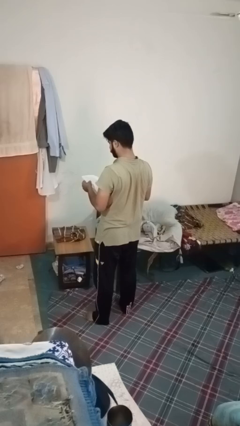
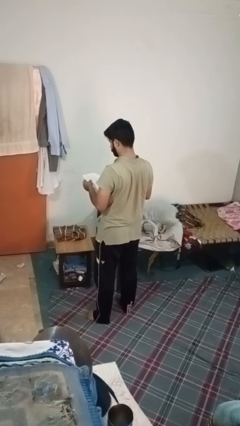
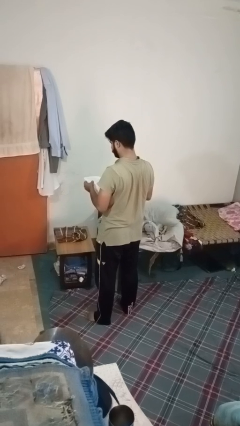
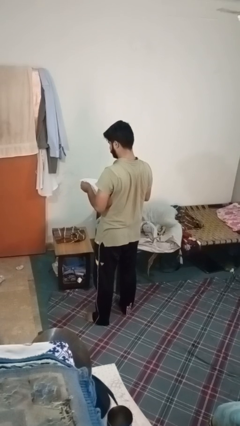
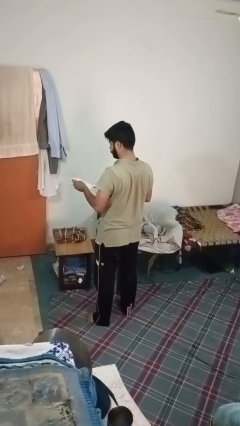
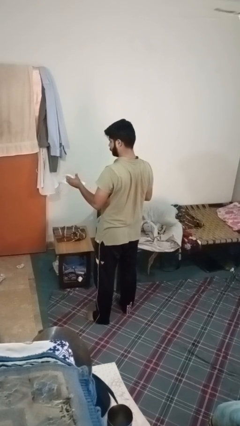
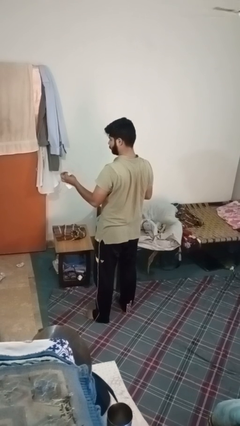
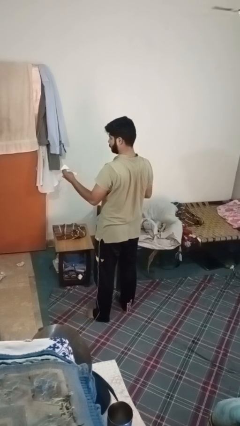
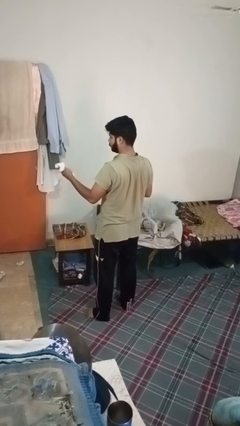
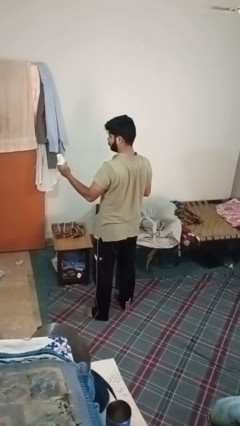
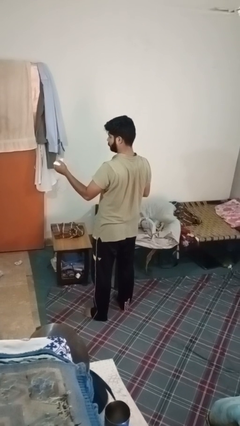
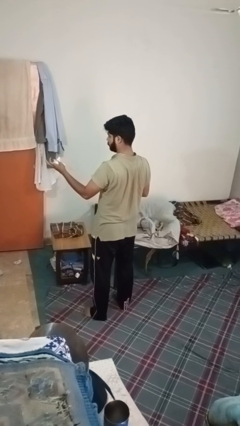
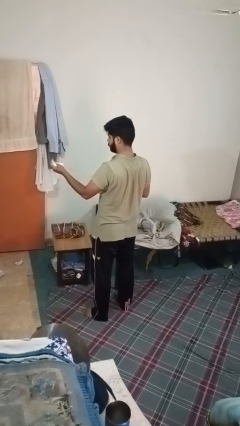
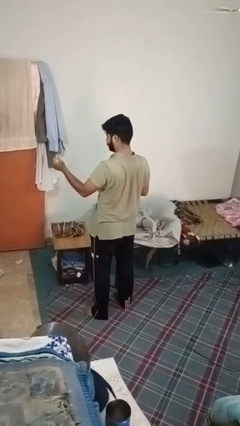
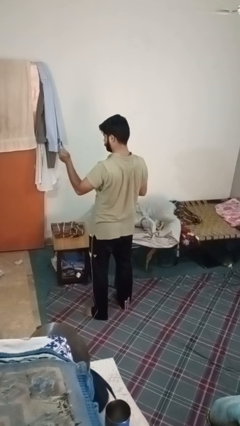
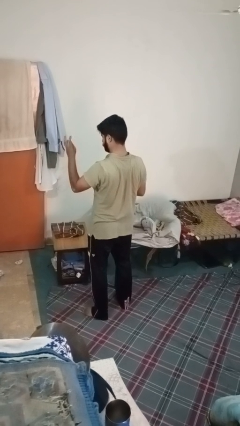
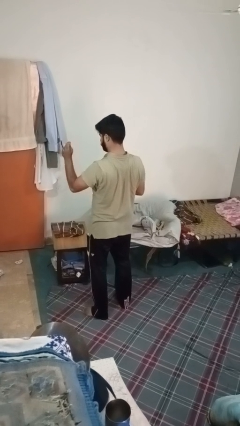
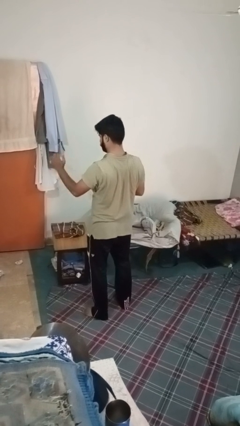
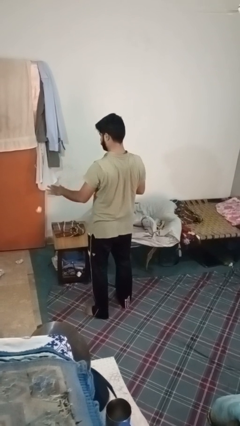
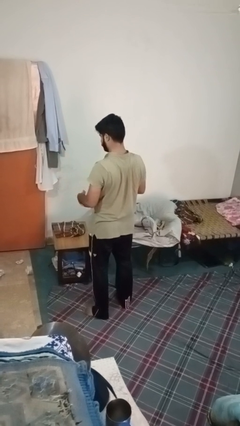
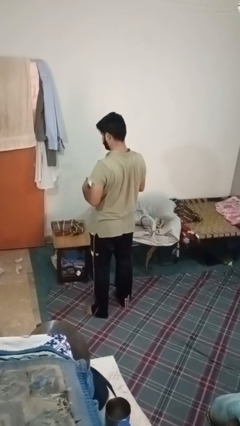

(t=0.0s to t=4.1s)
person crumples paper

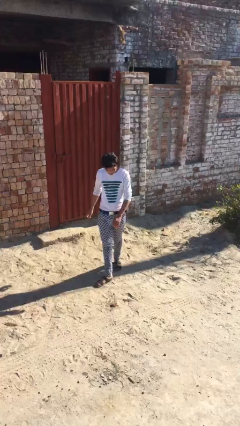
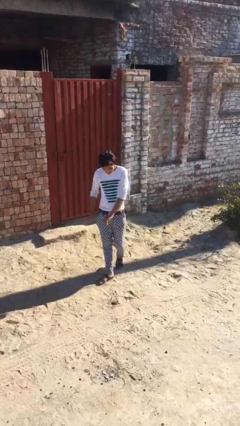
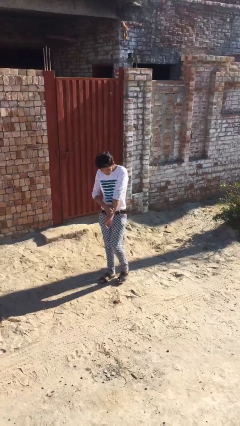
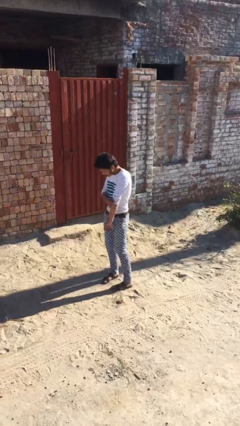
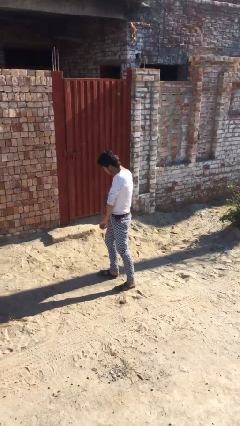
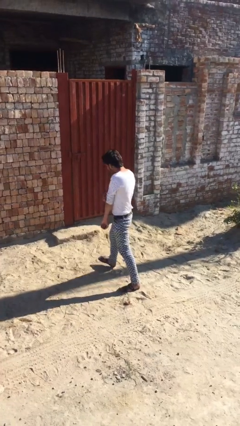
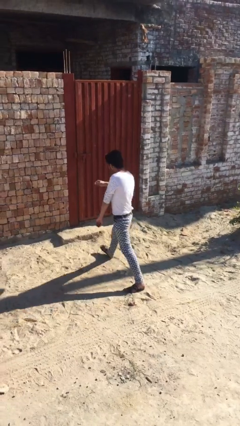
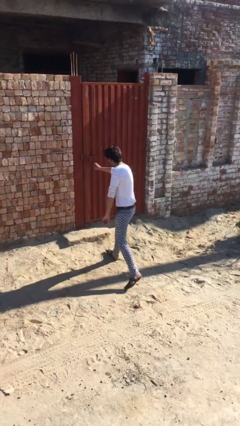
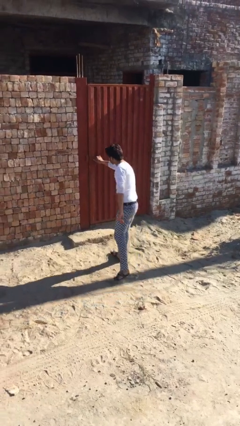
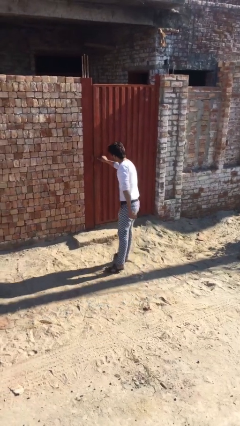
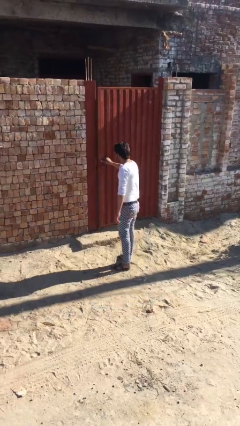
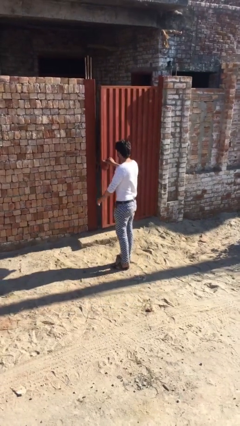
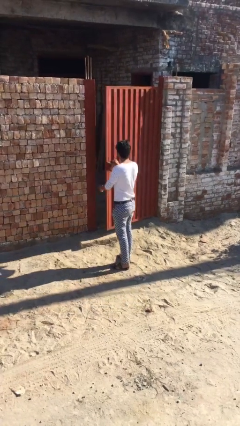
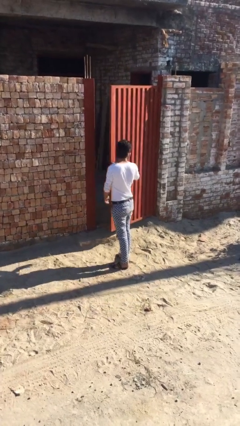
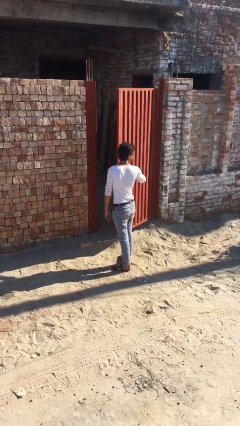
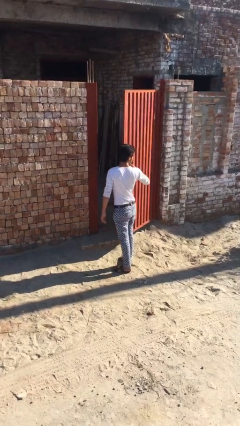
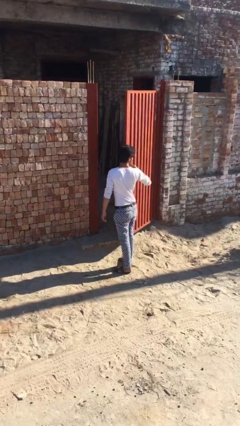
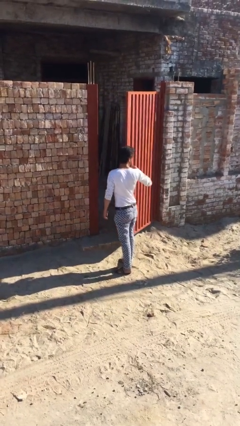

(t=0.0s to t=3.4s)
person opens facility door

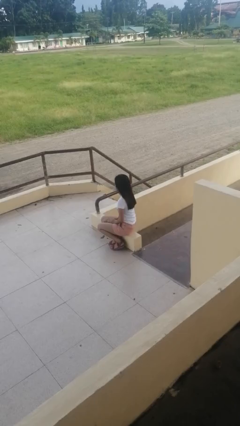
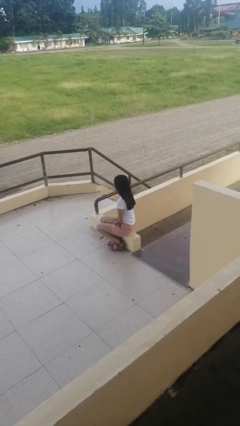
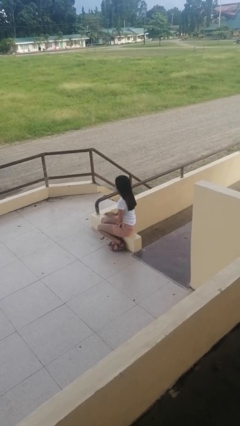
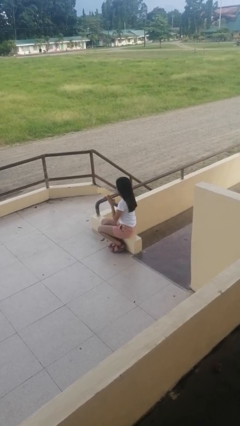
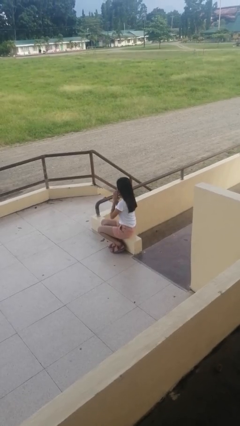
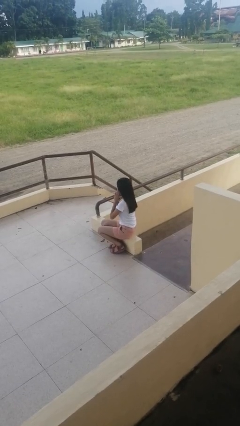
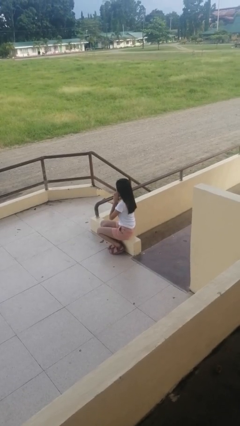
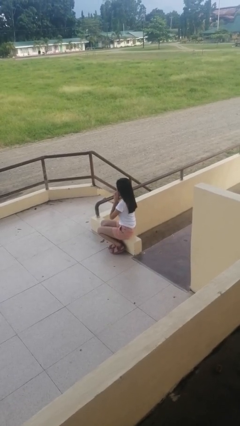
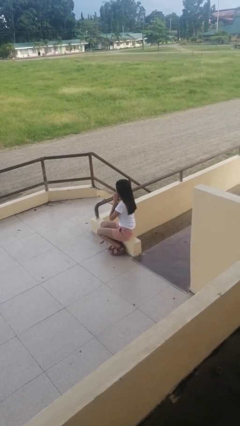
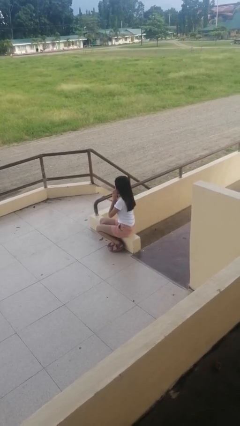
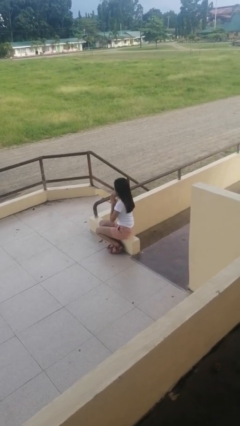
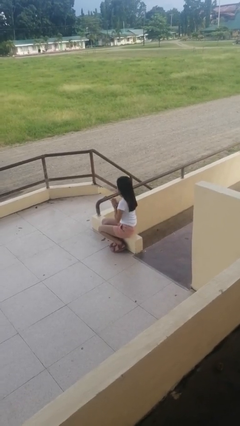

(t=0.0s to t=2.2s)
person prays

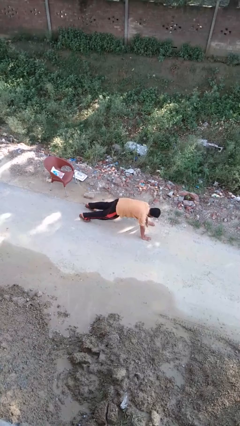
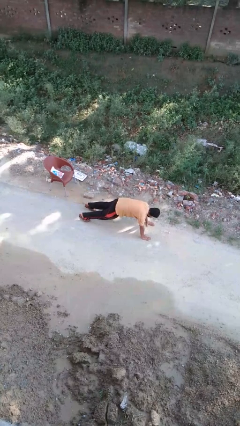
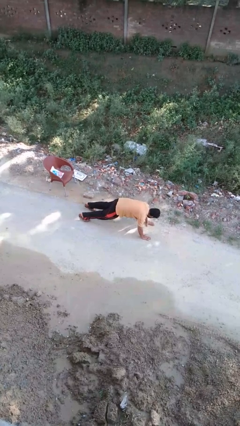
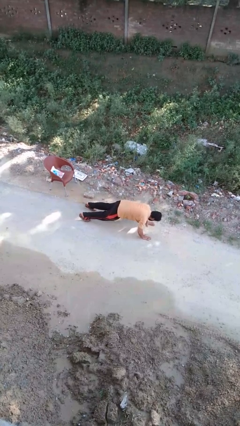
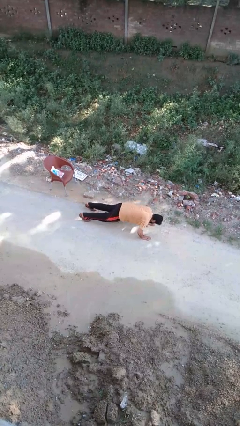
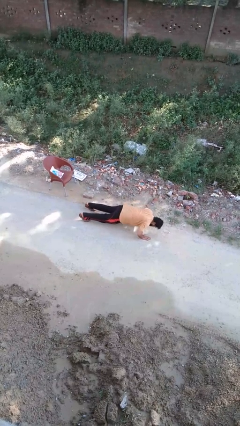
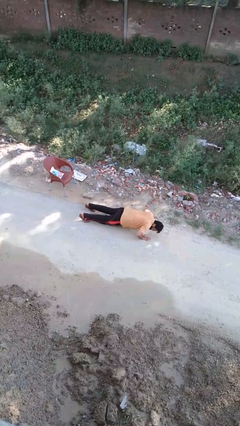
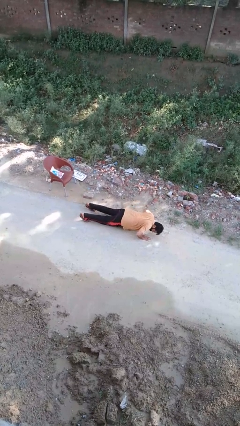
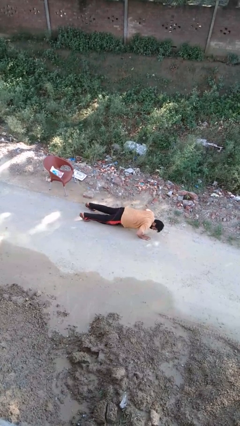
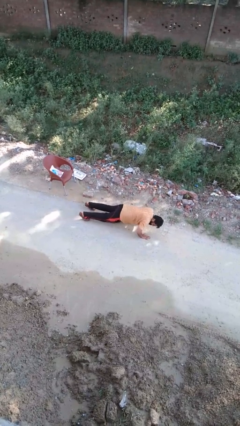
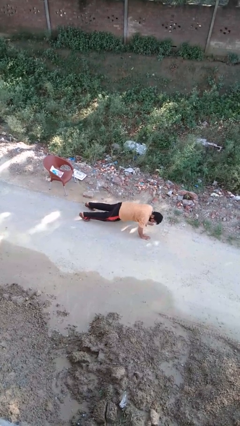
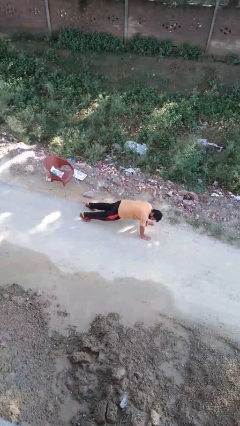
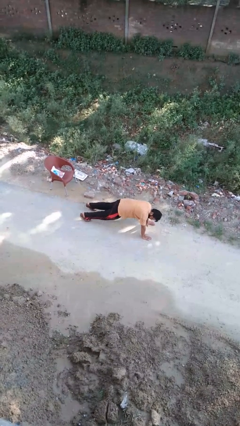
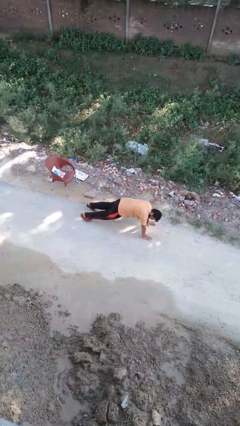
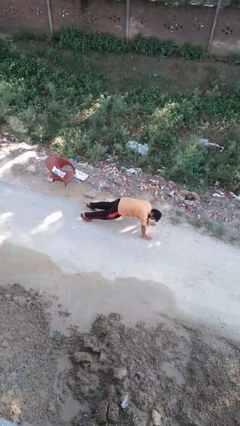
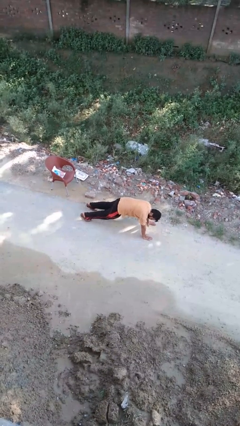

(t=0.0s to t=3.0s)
person exercises with pushup

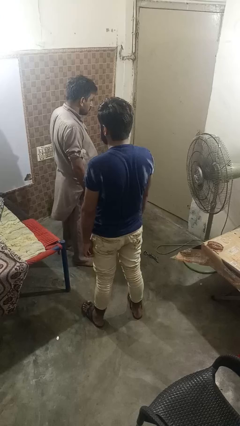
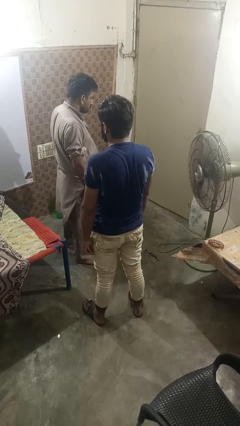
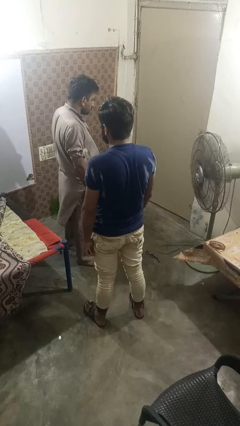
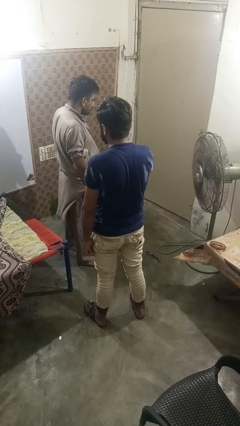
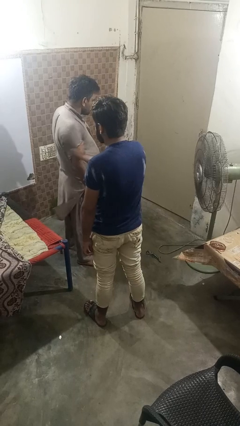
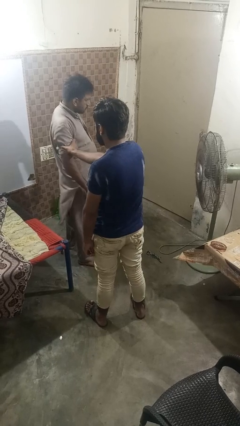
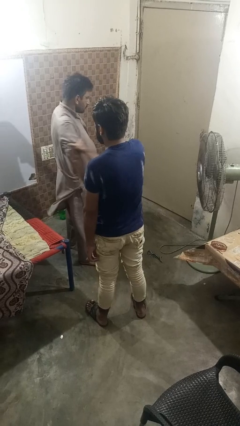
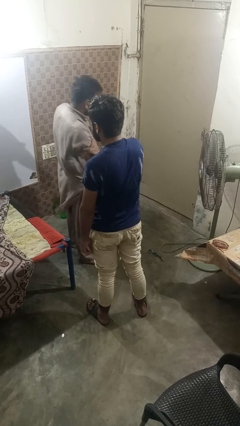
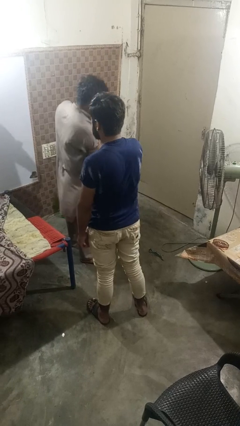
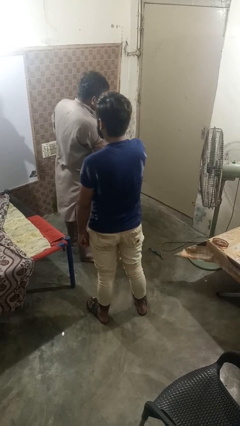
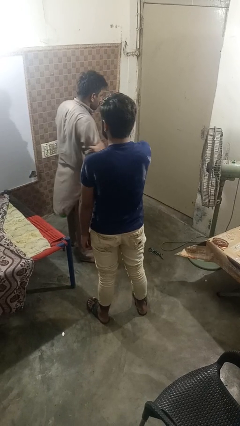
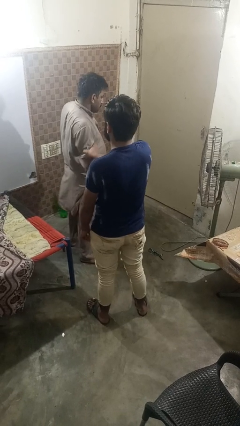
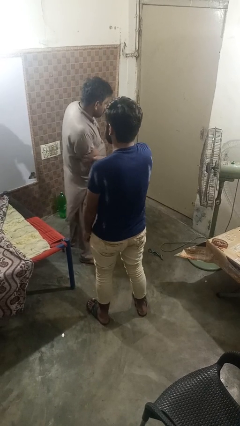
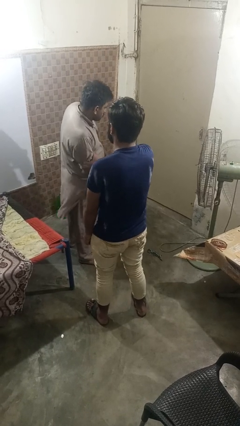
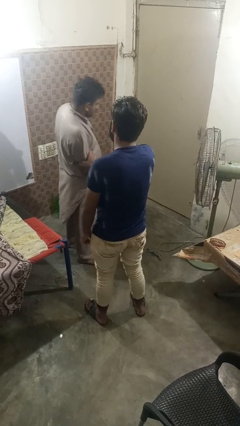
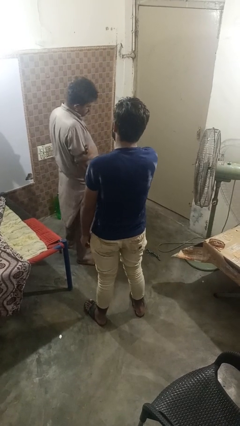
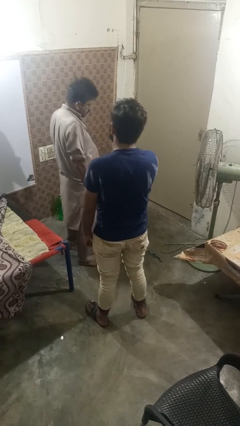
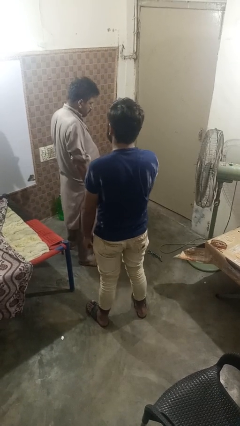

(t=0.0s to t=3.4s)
person grabs person by bicep

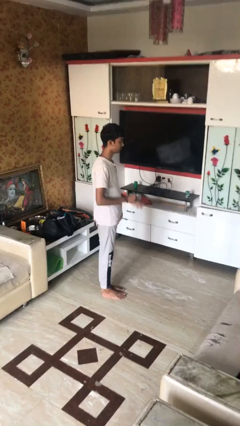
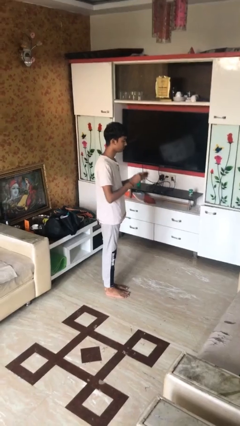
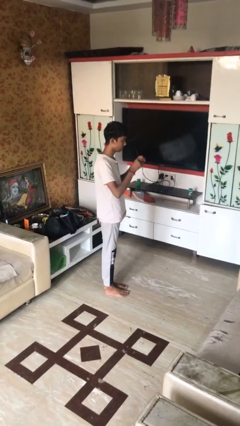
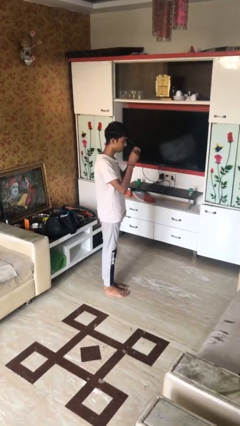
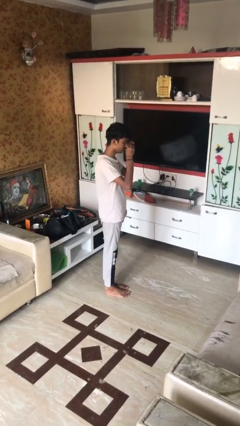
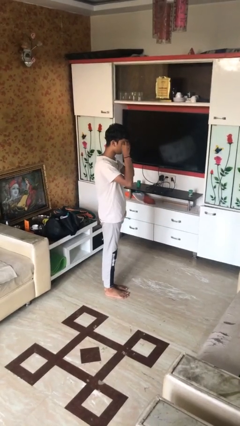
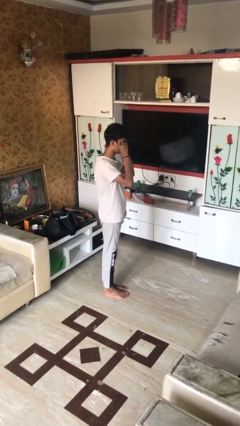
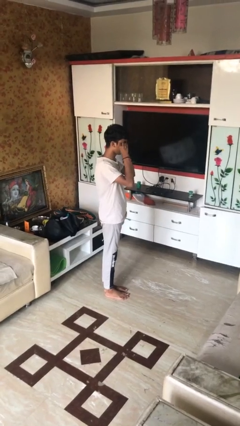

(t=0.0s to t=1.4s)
person puts on sunglasses

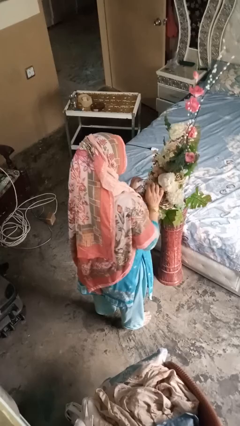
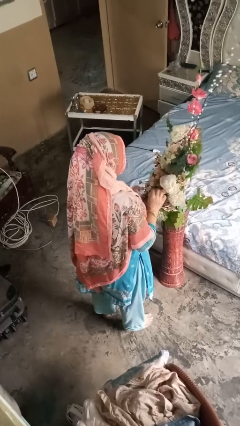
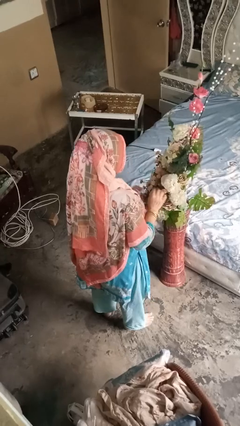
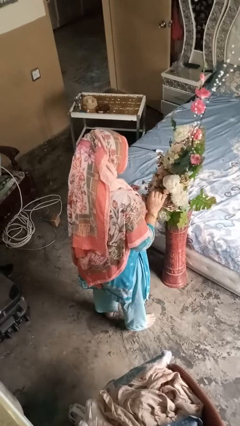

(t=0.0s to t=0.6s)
person arranges flowers in vase
